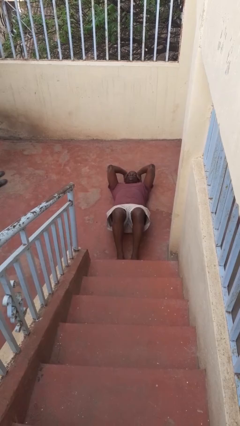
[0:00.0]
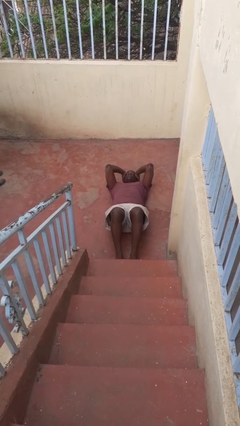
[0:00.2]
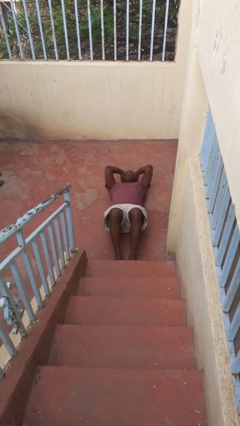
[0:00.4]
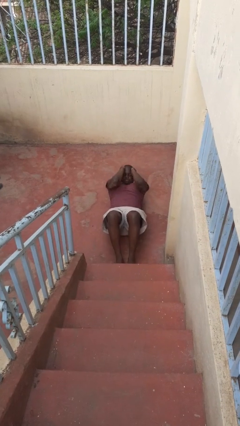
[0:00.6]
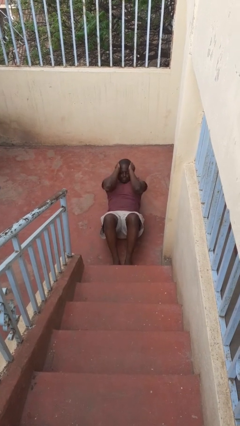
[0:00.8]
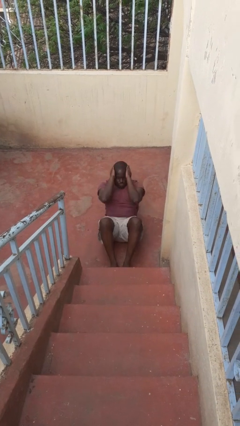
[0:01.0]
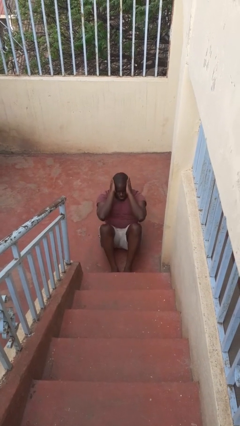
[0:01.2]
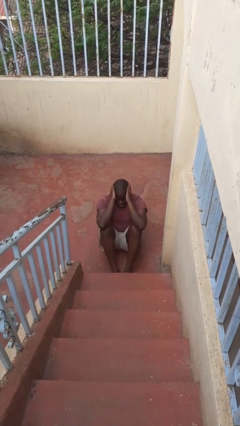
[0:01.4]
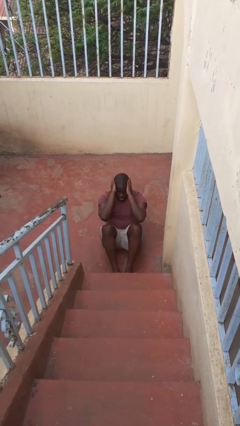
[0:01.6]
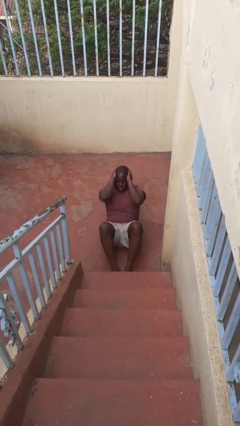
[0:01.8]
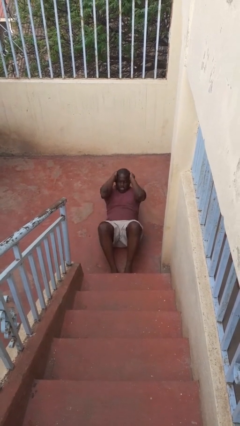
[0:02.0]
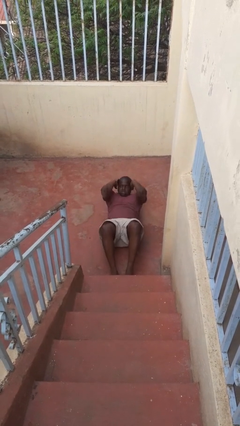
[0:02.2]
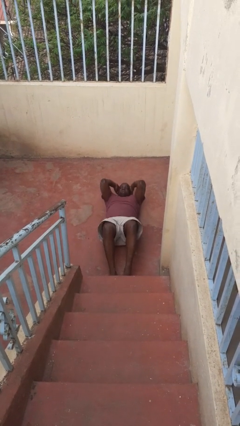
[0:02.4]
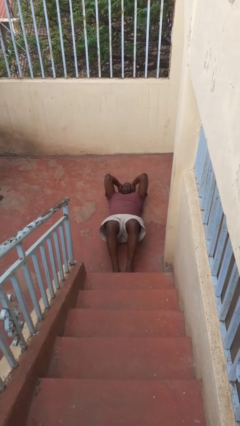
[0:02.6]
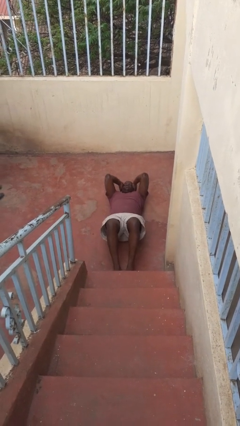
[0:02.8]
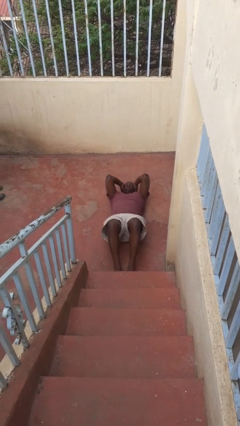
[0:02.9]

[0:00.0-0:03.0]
person exercises with situp

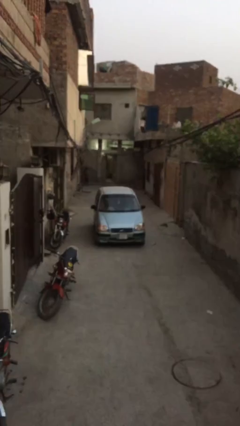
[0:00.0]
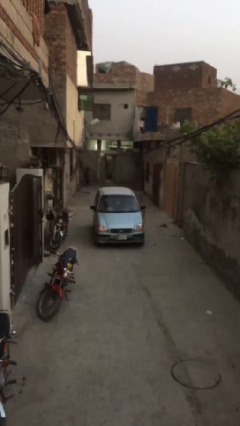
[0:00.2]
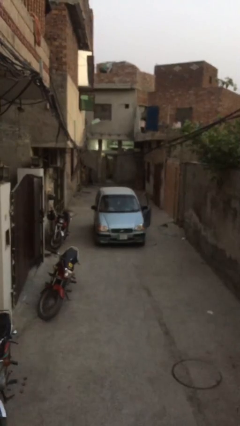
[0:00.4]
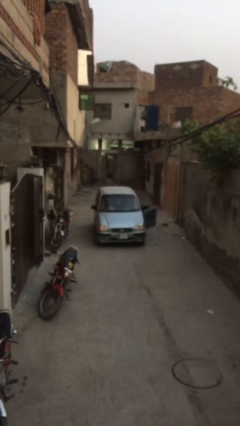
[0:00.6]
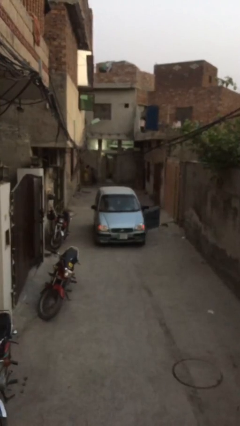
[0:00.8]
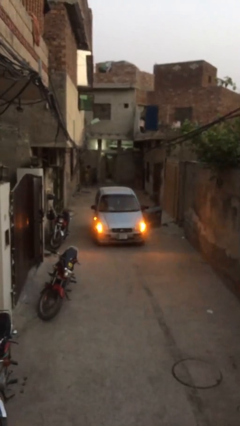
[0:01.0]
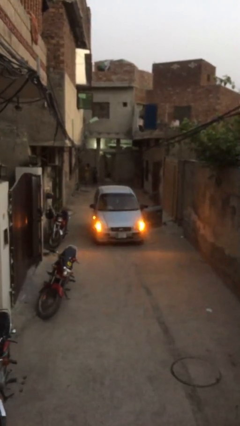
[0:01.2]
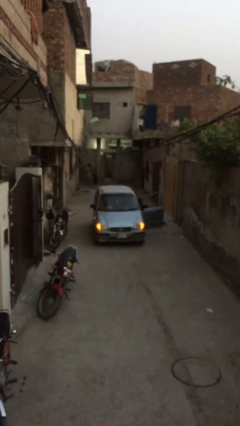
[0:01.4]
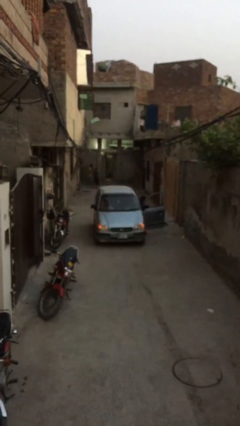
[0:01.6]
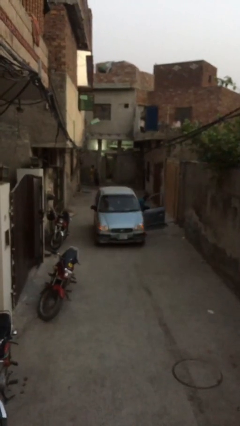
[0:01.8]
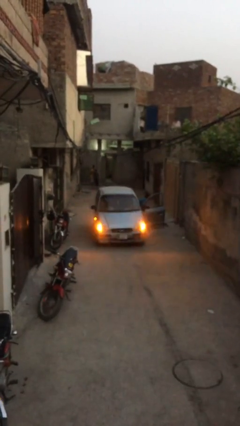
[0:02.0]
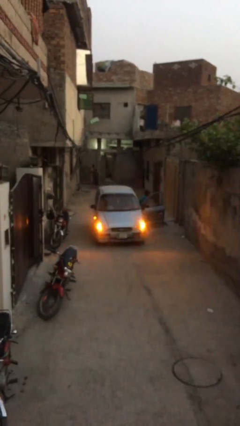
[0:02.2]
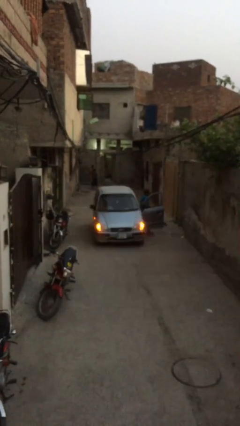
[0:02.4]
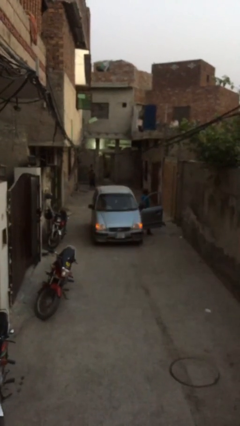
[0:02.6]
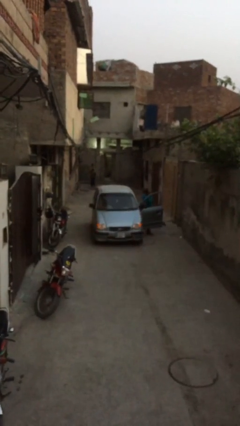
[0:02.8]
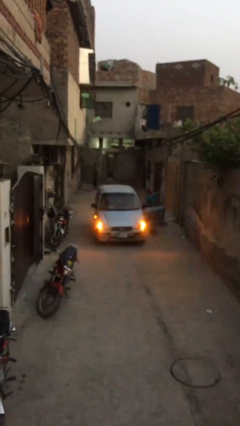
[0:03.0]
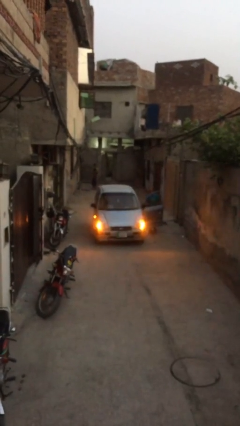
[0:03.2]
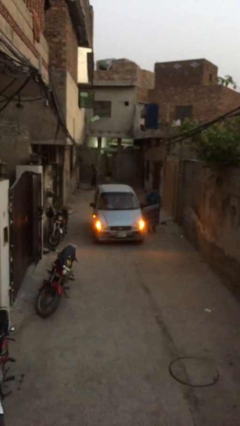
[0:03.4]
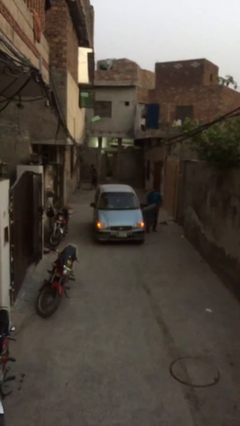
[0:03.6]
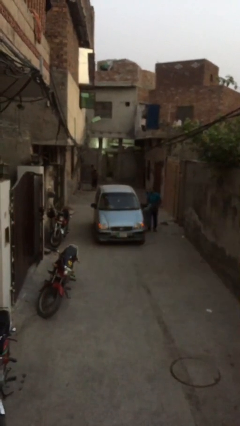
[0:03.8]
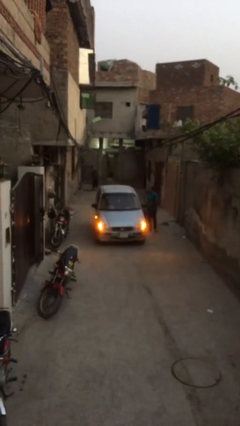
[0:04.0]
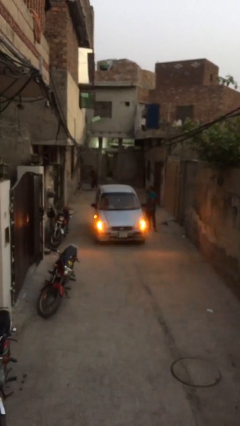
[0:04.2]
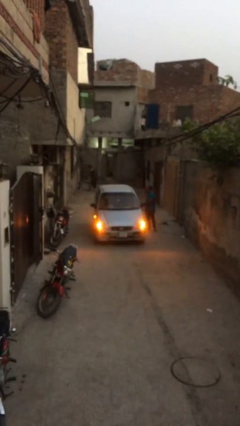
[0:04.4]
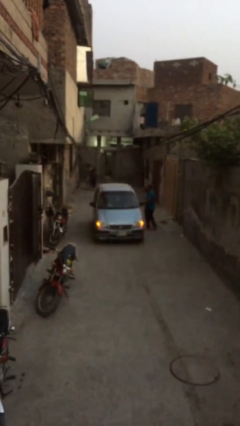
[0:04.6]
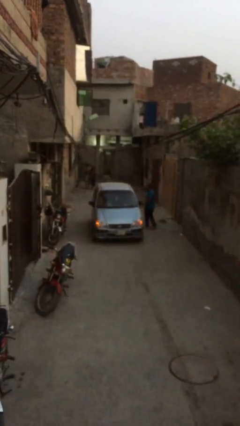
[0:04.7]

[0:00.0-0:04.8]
car drops off person

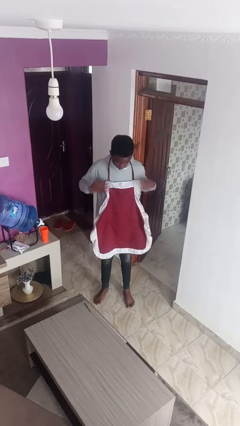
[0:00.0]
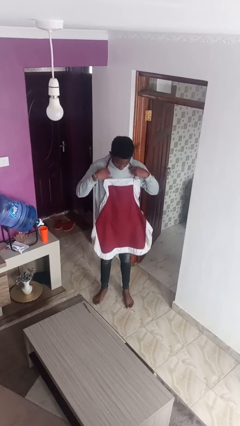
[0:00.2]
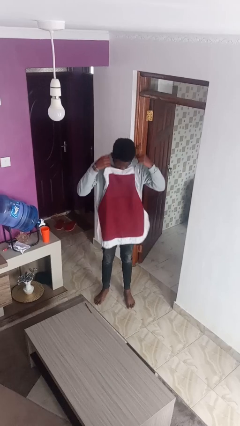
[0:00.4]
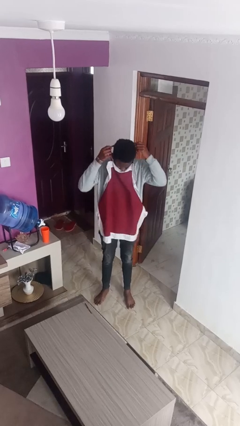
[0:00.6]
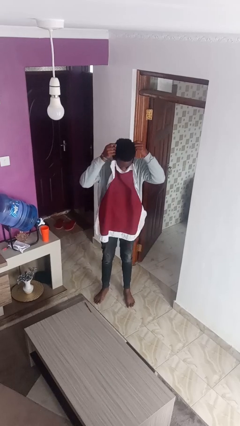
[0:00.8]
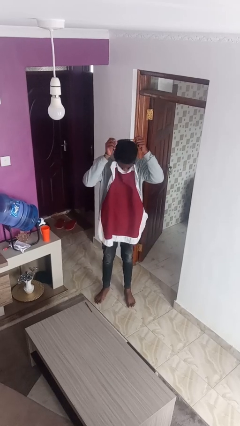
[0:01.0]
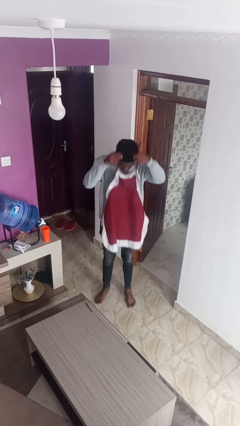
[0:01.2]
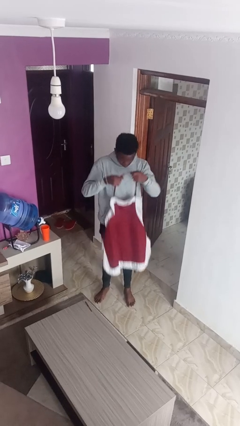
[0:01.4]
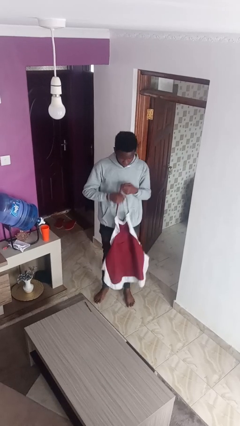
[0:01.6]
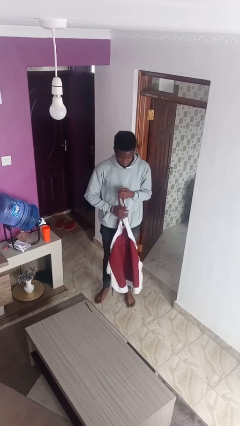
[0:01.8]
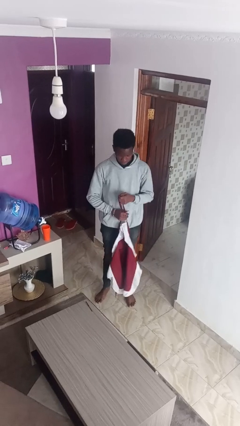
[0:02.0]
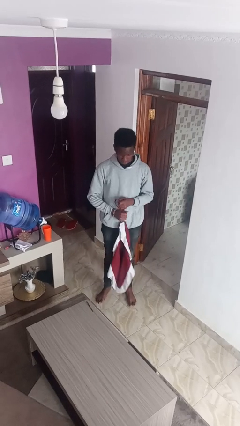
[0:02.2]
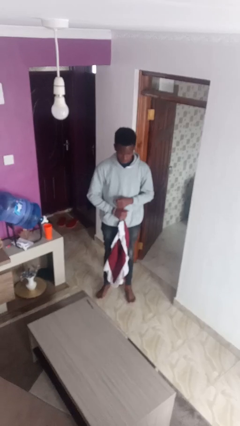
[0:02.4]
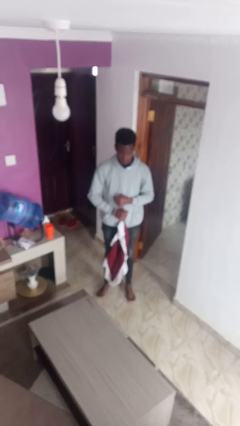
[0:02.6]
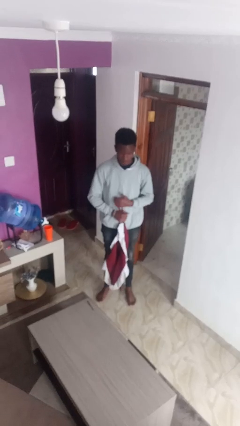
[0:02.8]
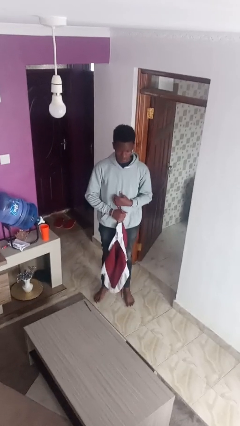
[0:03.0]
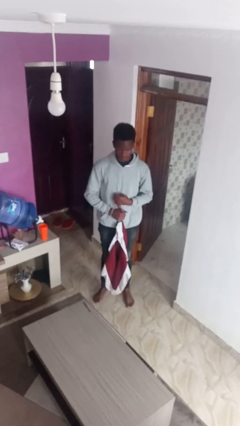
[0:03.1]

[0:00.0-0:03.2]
person takes off apron

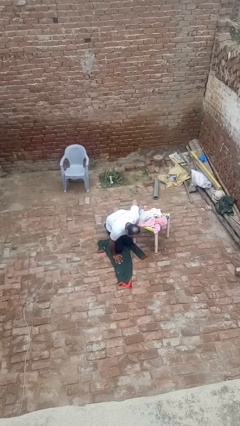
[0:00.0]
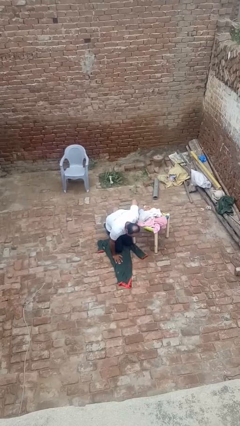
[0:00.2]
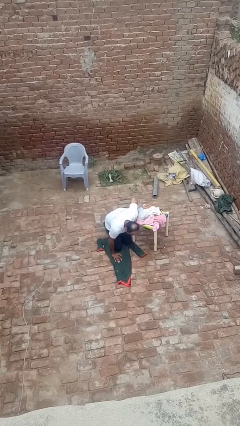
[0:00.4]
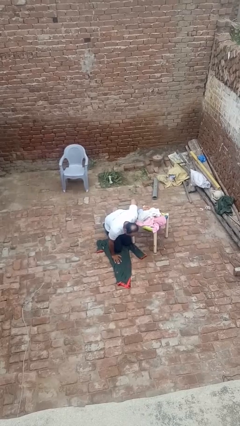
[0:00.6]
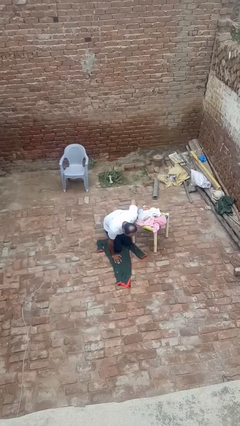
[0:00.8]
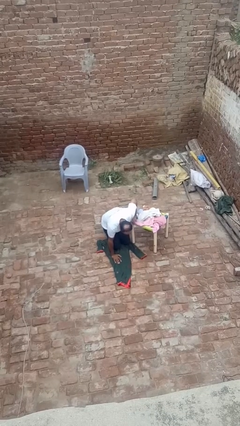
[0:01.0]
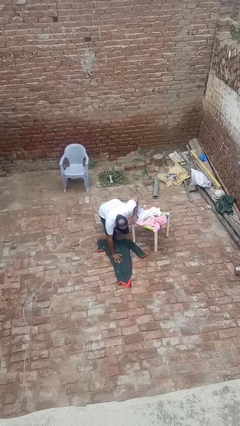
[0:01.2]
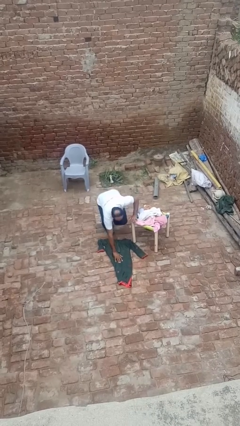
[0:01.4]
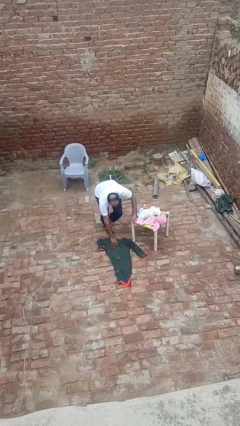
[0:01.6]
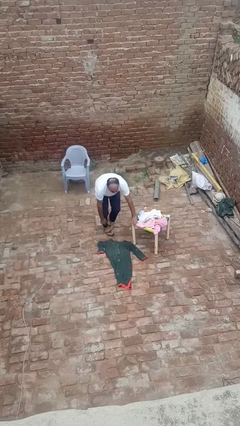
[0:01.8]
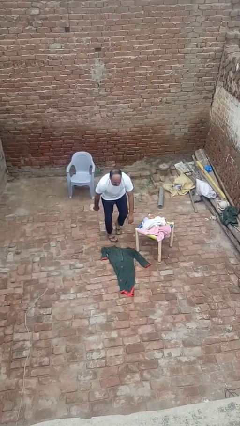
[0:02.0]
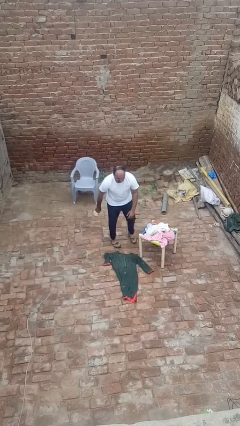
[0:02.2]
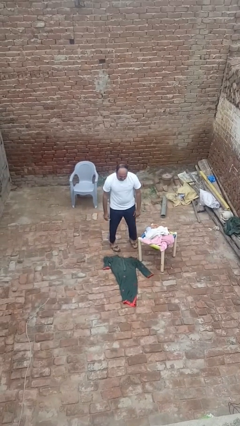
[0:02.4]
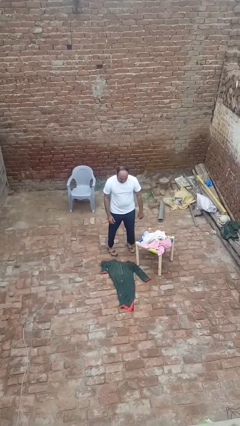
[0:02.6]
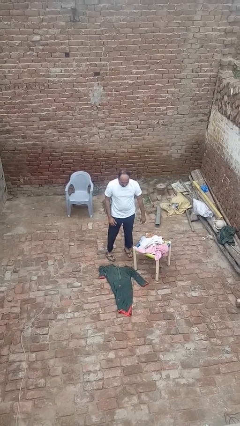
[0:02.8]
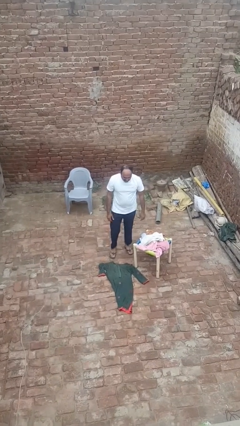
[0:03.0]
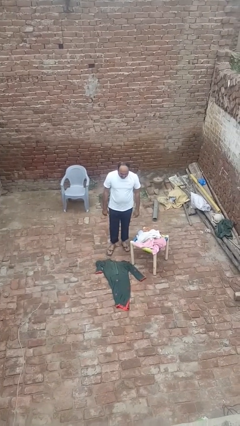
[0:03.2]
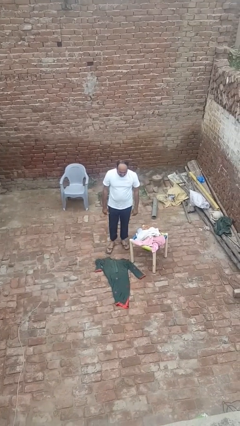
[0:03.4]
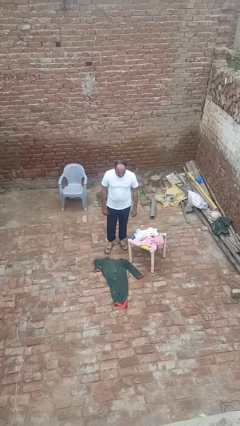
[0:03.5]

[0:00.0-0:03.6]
person stands up from floor

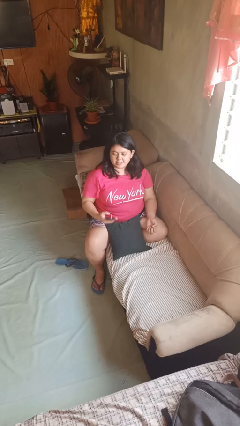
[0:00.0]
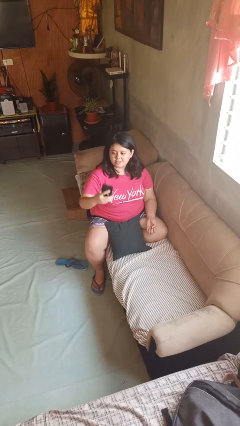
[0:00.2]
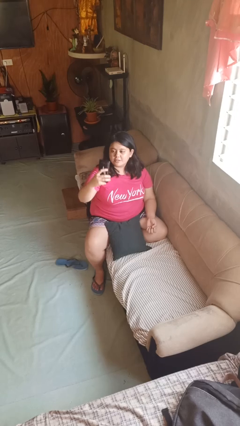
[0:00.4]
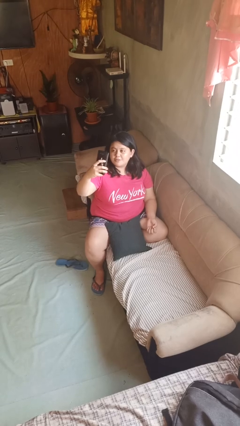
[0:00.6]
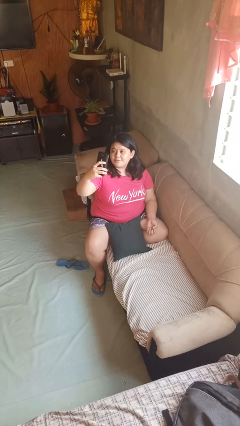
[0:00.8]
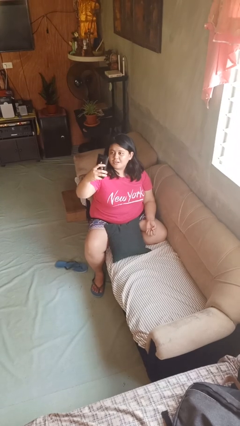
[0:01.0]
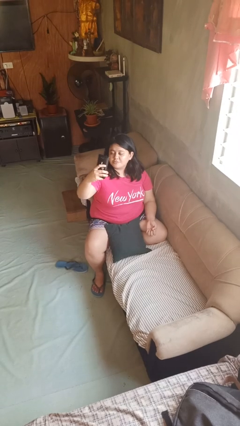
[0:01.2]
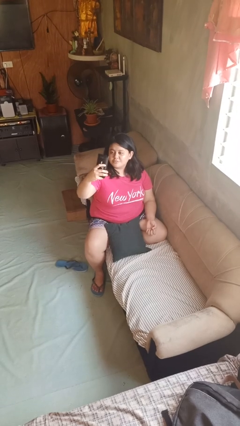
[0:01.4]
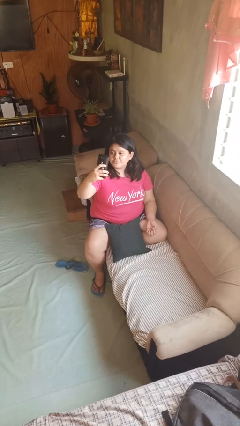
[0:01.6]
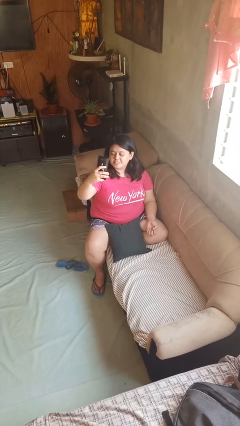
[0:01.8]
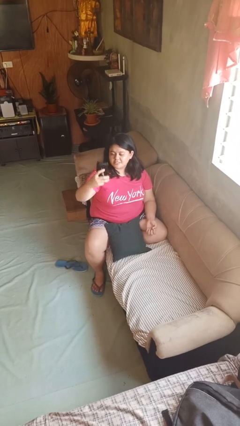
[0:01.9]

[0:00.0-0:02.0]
person takes selfie

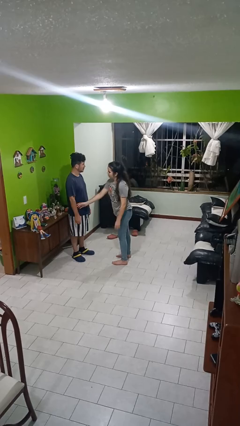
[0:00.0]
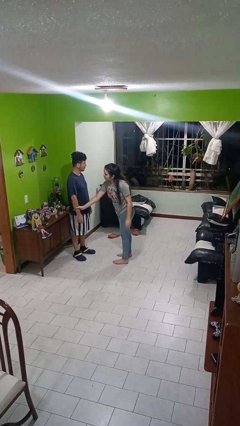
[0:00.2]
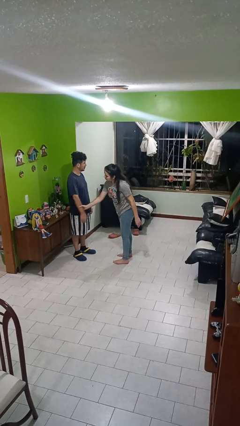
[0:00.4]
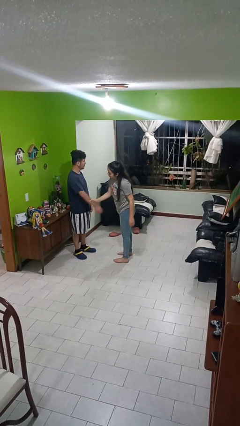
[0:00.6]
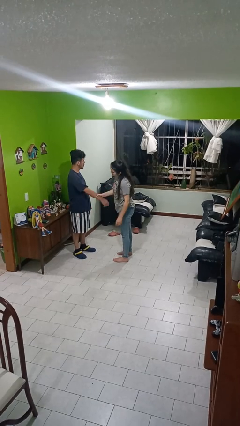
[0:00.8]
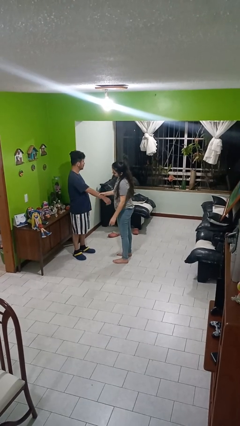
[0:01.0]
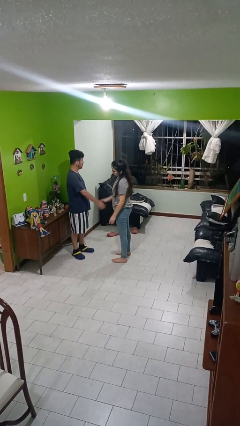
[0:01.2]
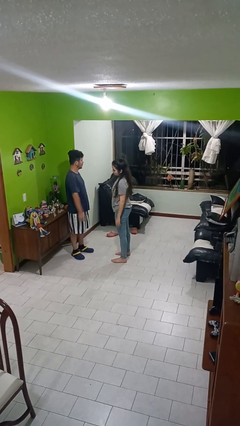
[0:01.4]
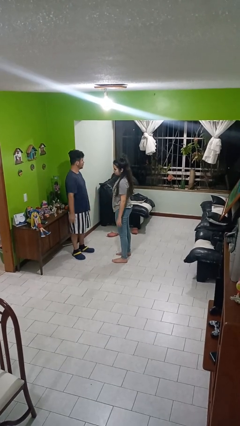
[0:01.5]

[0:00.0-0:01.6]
person grabs person by forearm
